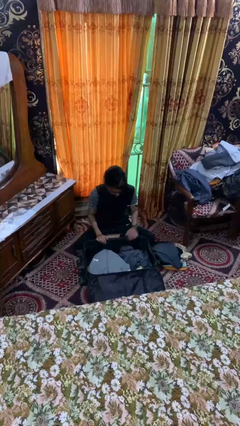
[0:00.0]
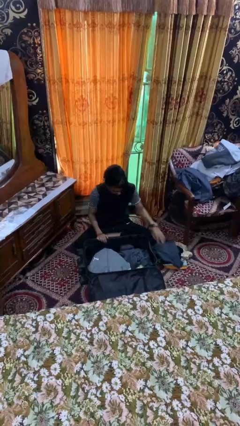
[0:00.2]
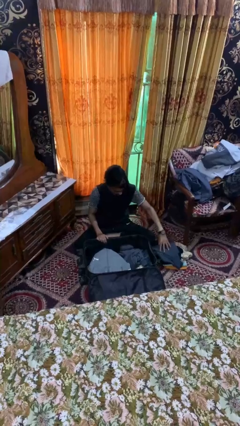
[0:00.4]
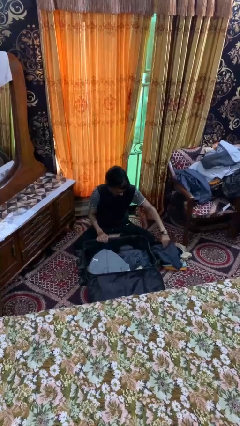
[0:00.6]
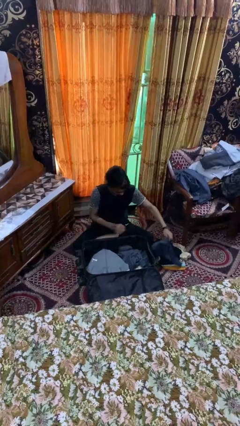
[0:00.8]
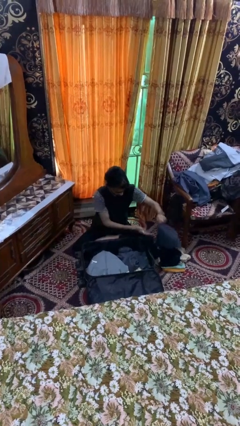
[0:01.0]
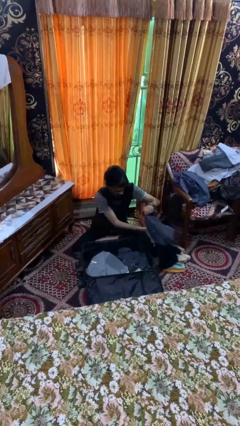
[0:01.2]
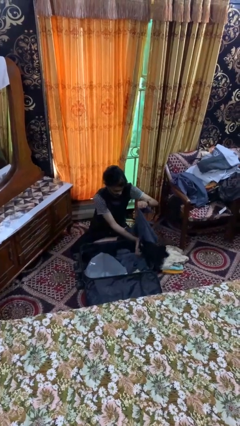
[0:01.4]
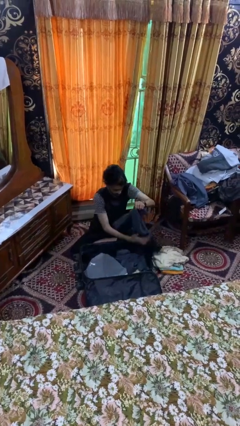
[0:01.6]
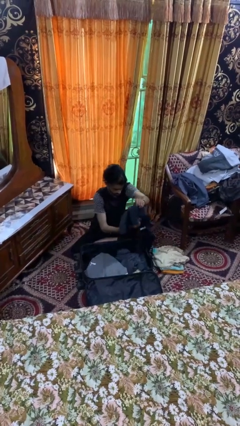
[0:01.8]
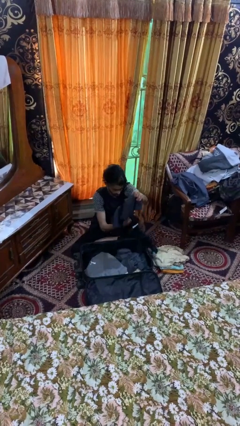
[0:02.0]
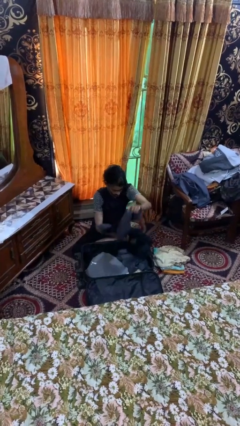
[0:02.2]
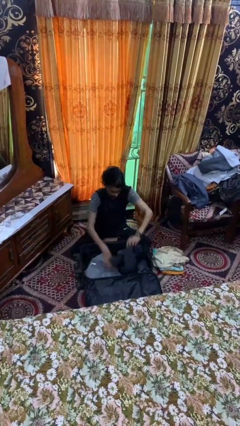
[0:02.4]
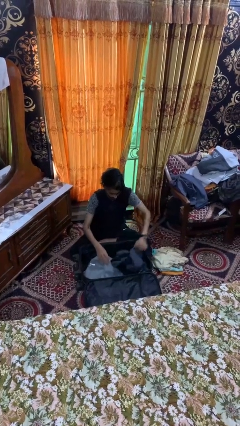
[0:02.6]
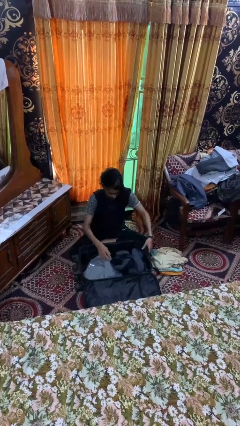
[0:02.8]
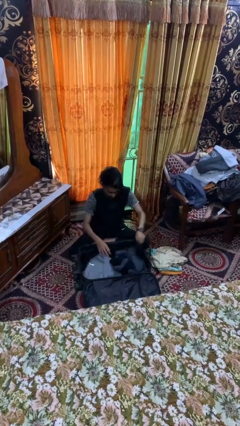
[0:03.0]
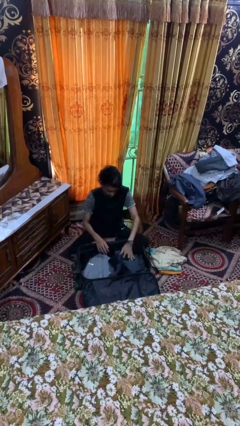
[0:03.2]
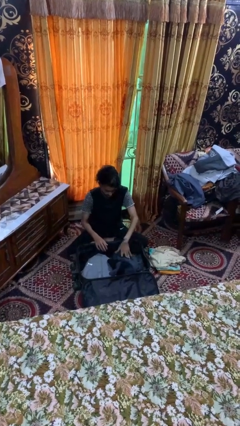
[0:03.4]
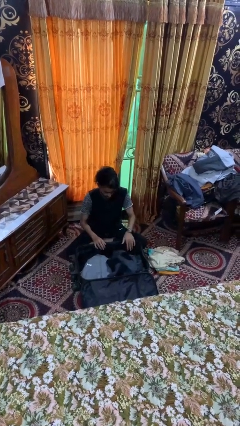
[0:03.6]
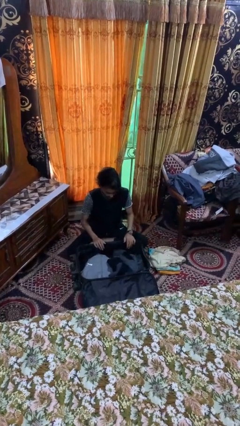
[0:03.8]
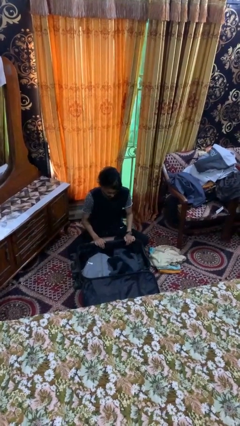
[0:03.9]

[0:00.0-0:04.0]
person loads clothes into suitcase

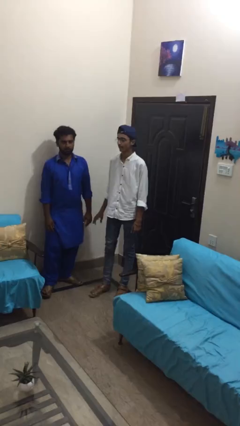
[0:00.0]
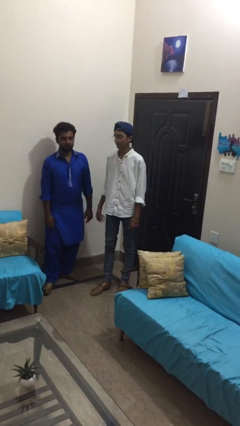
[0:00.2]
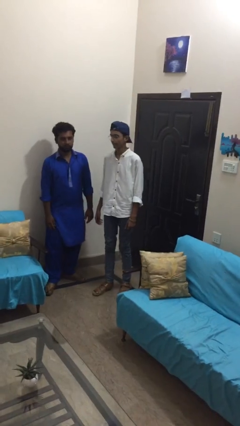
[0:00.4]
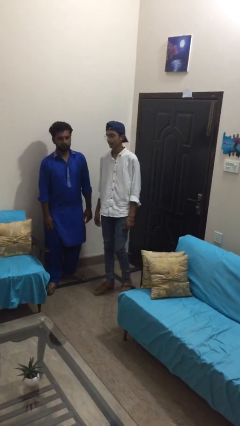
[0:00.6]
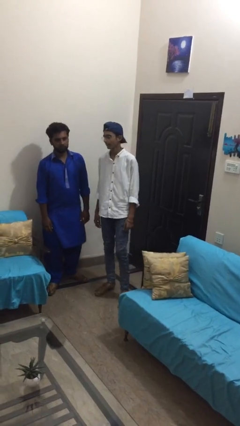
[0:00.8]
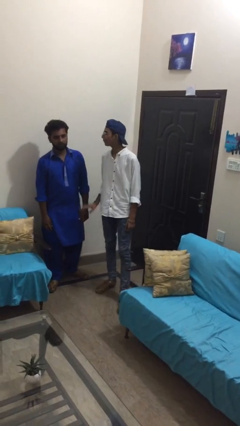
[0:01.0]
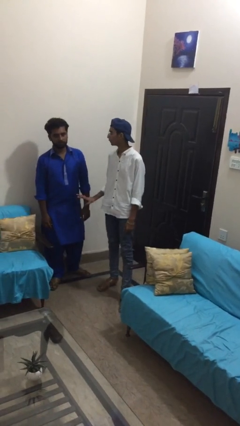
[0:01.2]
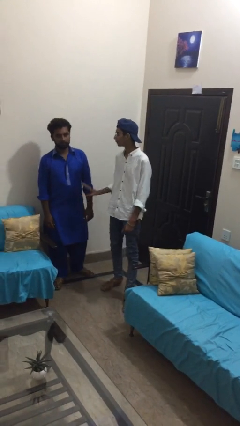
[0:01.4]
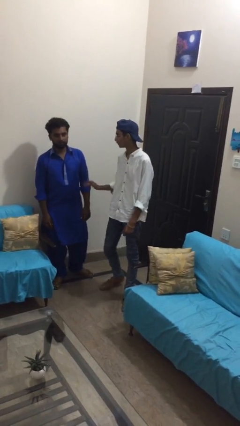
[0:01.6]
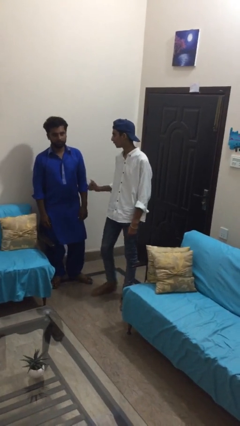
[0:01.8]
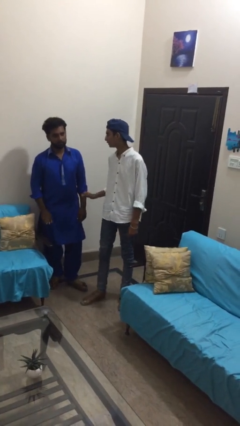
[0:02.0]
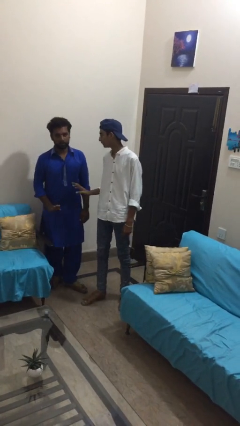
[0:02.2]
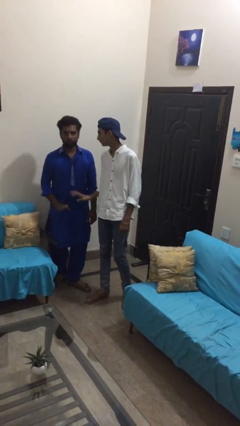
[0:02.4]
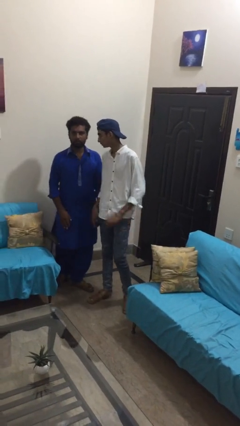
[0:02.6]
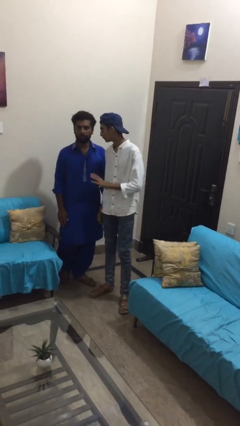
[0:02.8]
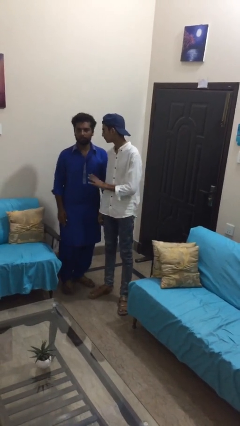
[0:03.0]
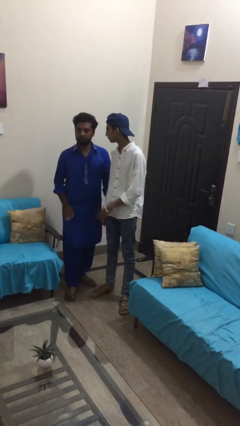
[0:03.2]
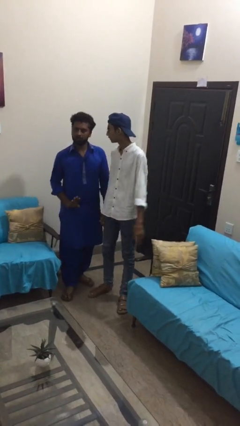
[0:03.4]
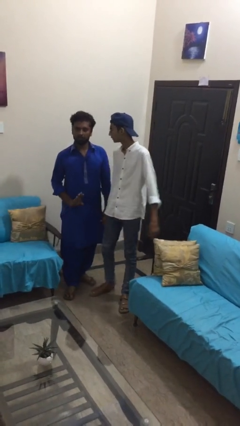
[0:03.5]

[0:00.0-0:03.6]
person talks to person

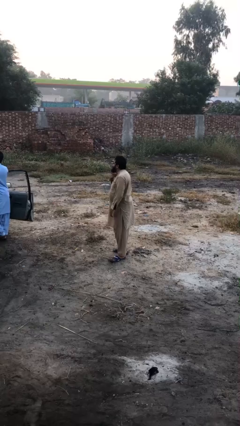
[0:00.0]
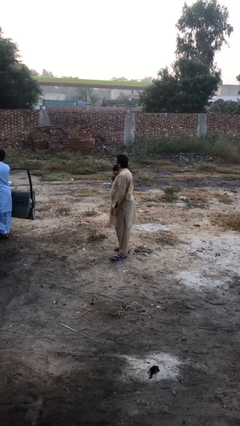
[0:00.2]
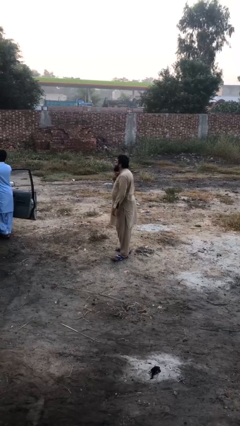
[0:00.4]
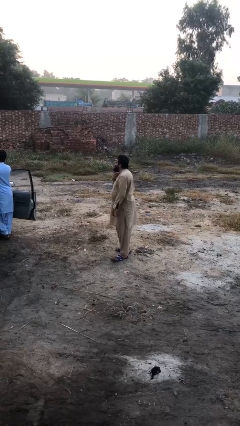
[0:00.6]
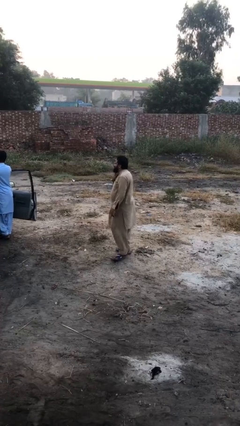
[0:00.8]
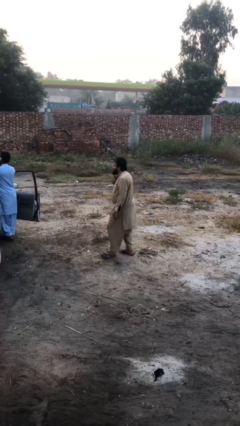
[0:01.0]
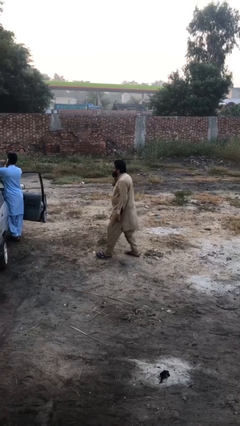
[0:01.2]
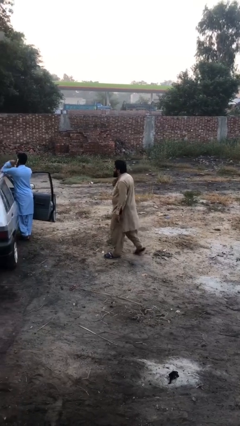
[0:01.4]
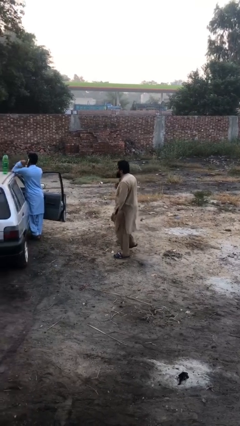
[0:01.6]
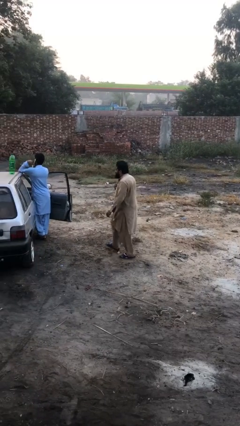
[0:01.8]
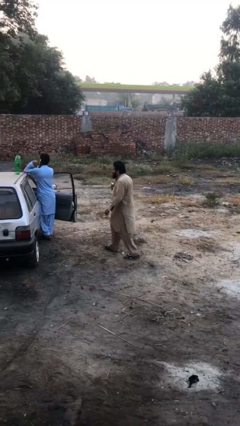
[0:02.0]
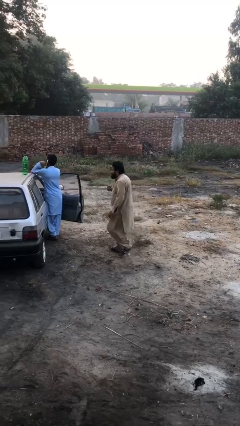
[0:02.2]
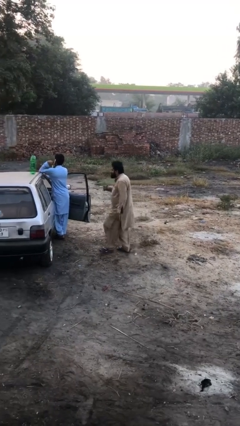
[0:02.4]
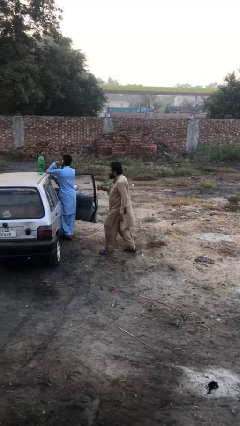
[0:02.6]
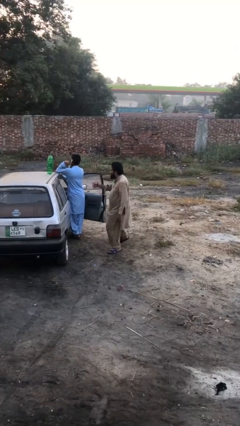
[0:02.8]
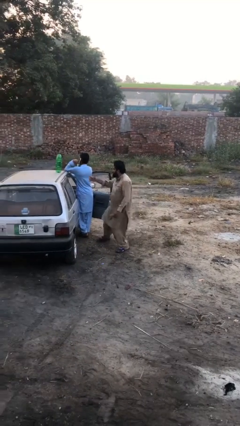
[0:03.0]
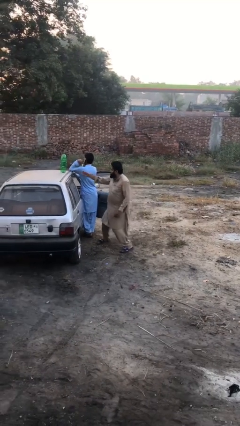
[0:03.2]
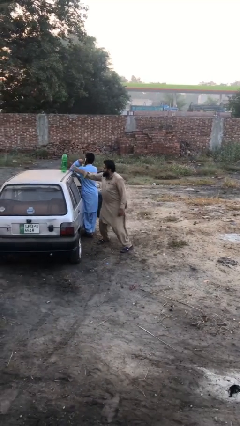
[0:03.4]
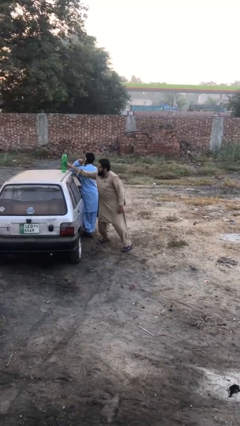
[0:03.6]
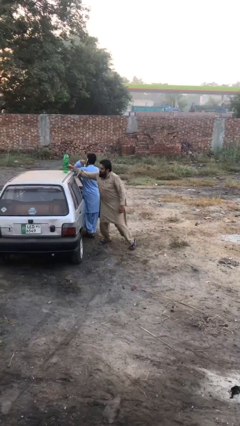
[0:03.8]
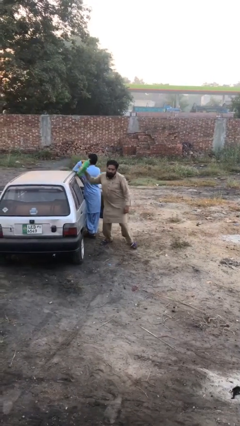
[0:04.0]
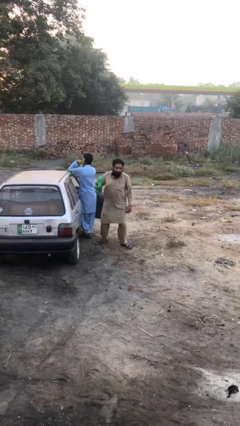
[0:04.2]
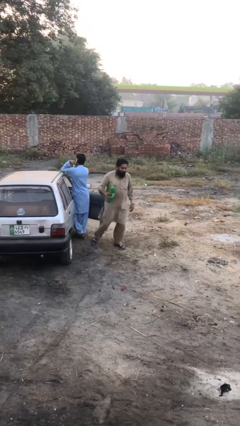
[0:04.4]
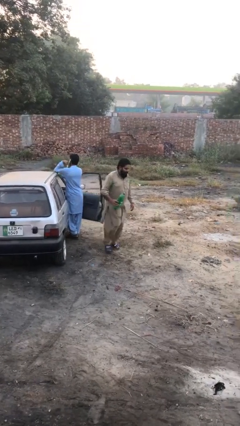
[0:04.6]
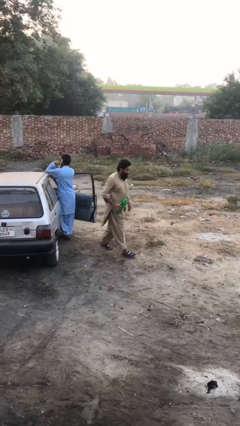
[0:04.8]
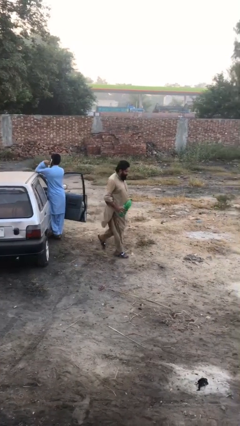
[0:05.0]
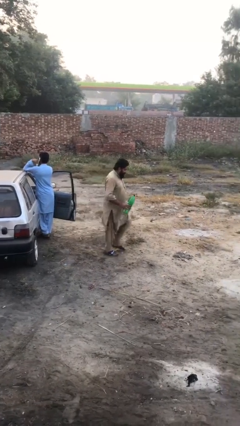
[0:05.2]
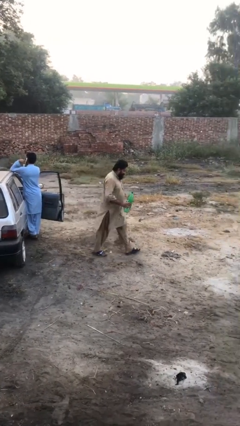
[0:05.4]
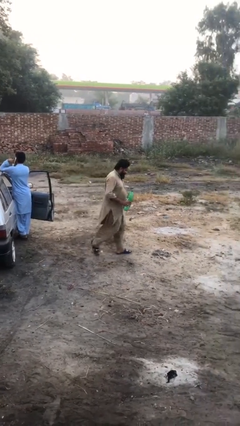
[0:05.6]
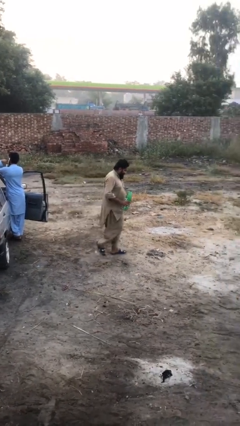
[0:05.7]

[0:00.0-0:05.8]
person steals object from person

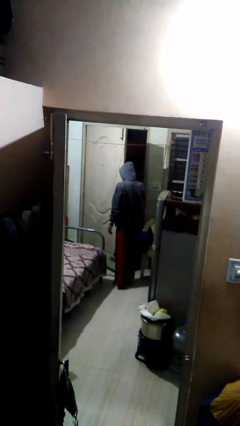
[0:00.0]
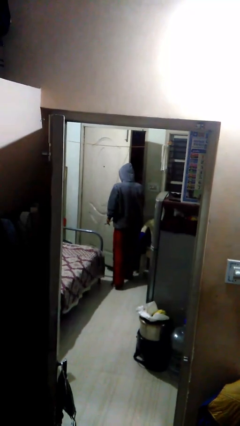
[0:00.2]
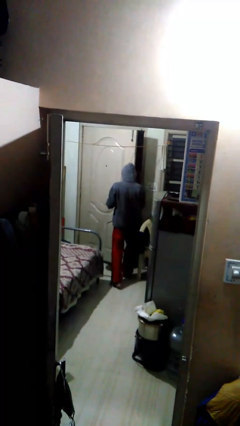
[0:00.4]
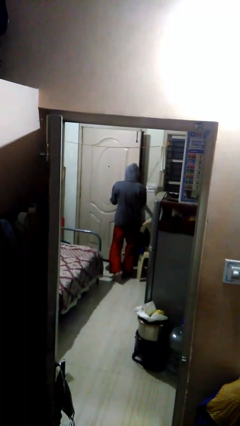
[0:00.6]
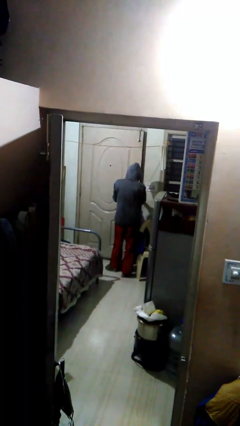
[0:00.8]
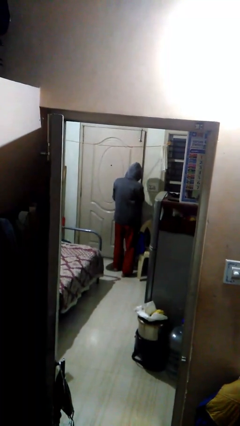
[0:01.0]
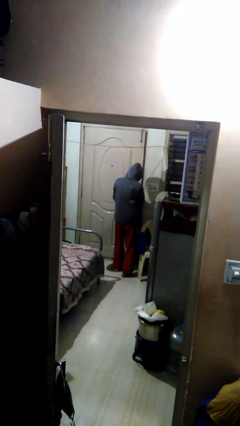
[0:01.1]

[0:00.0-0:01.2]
person closes facility door

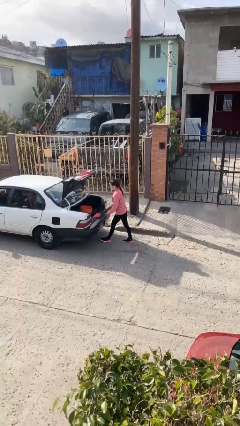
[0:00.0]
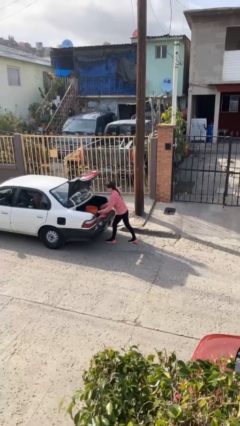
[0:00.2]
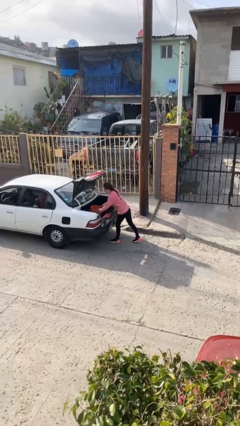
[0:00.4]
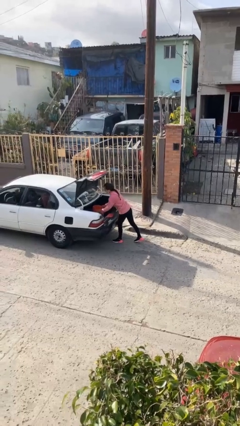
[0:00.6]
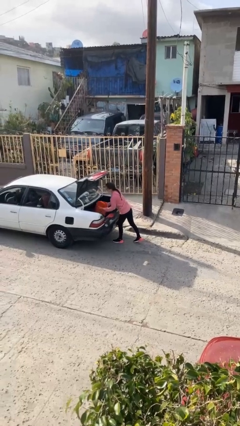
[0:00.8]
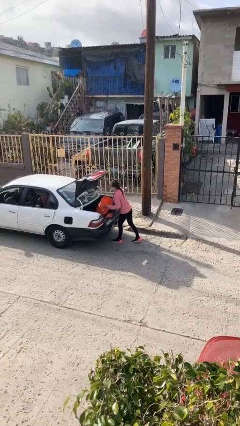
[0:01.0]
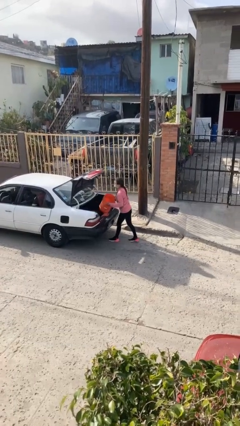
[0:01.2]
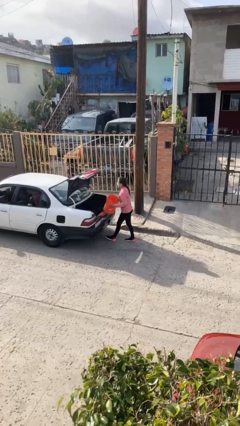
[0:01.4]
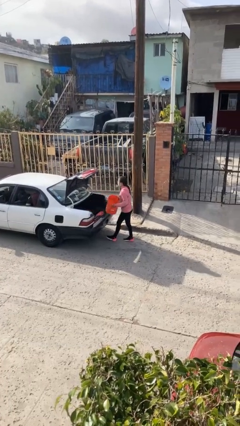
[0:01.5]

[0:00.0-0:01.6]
person unloads car

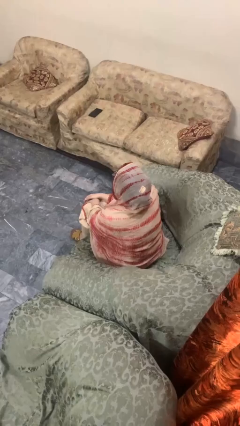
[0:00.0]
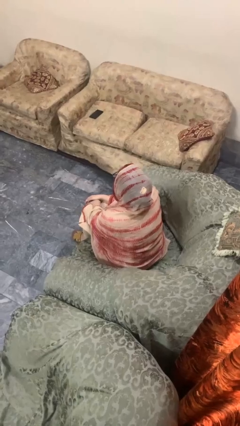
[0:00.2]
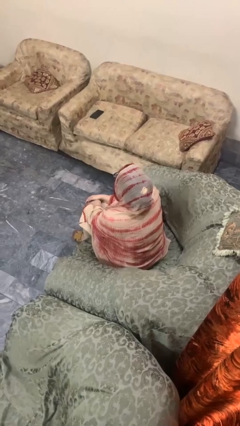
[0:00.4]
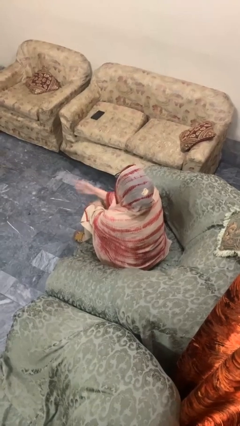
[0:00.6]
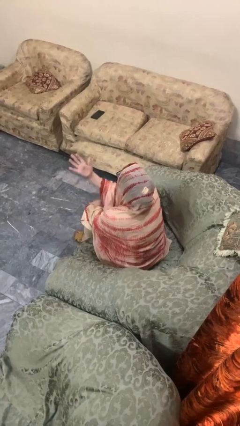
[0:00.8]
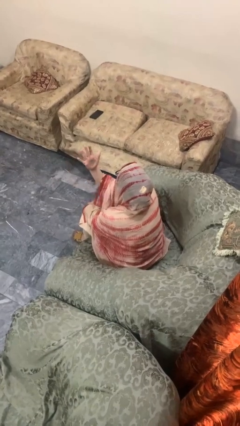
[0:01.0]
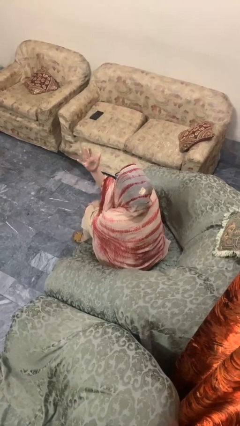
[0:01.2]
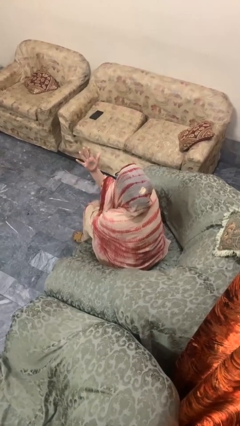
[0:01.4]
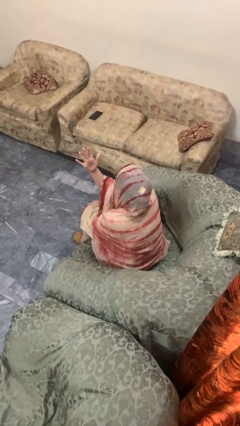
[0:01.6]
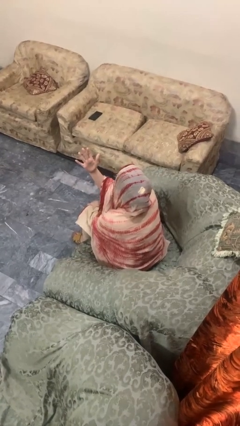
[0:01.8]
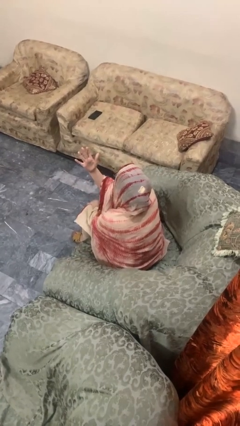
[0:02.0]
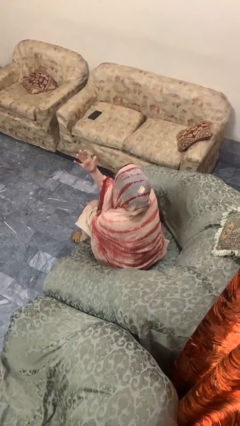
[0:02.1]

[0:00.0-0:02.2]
person gestures number five
